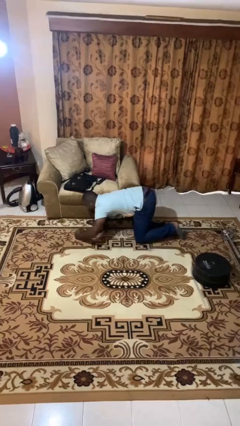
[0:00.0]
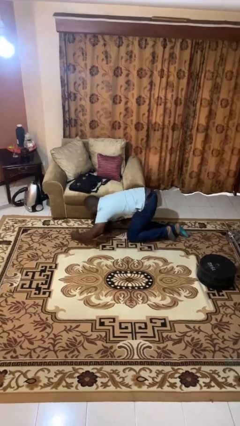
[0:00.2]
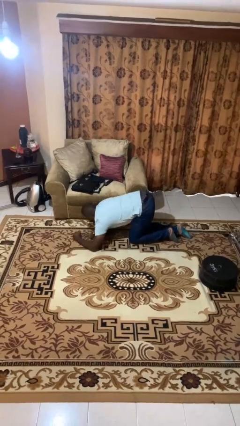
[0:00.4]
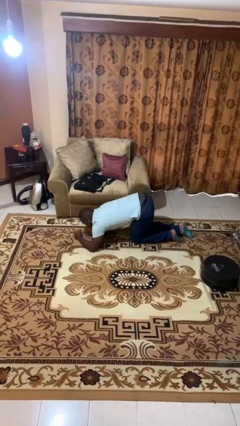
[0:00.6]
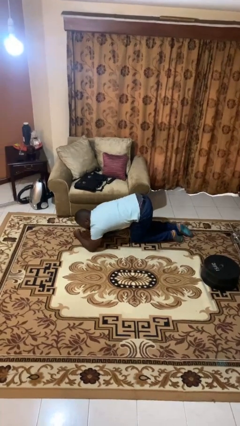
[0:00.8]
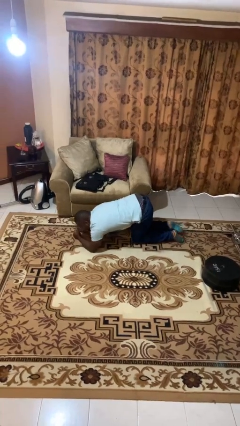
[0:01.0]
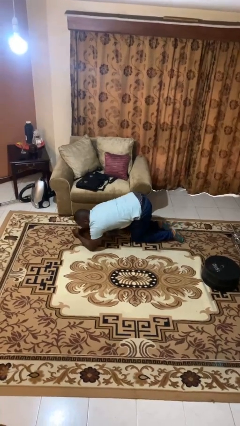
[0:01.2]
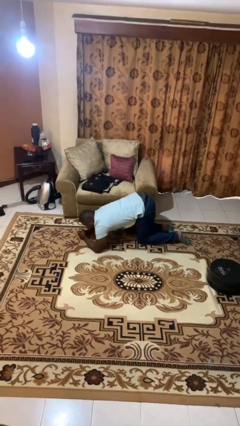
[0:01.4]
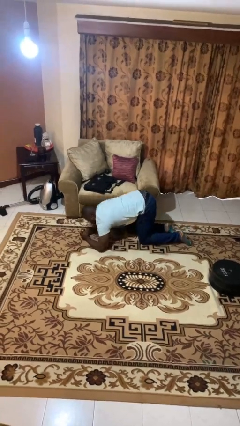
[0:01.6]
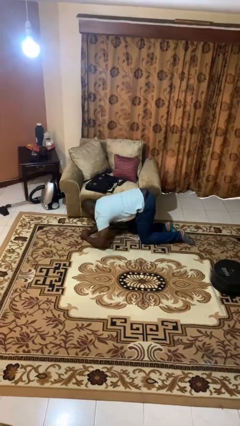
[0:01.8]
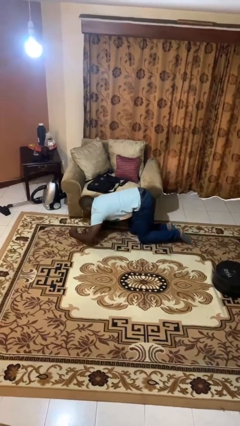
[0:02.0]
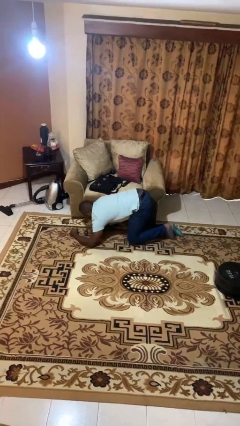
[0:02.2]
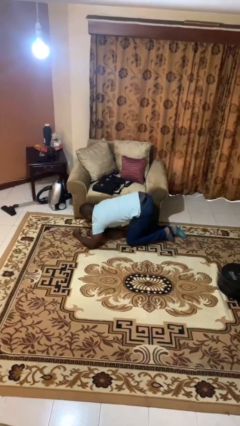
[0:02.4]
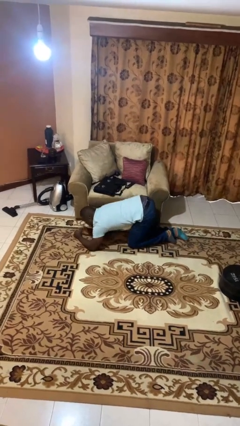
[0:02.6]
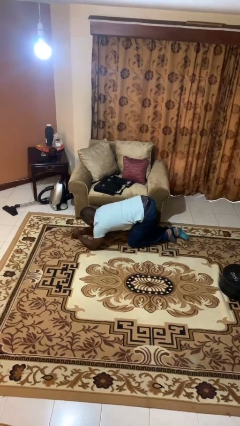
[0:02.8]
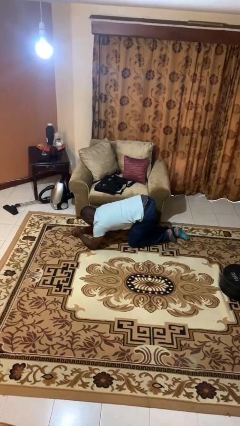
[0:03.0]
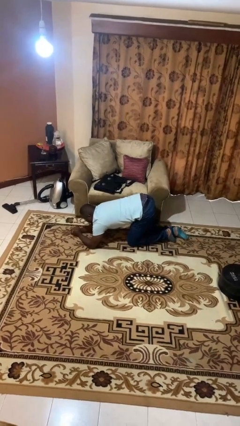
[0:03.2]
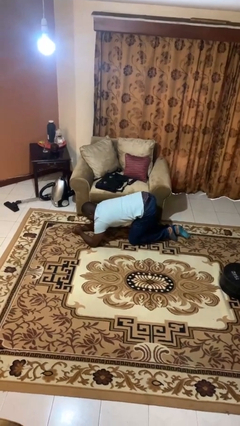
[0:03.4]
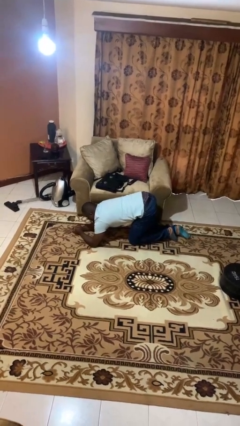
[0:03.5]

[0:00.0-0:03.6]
person crawls

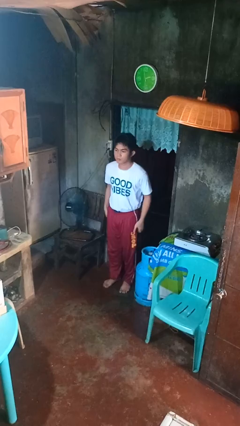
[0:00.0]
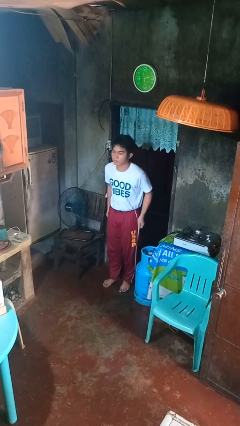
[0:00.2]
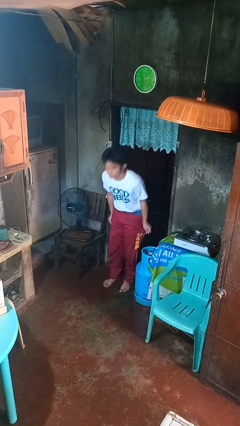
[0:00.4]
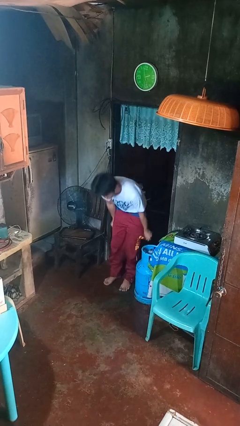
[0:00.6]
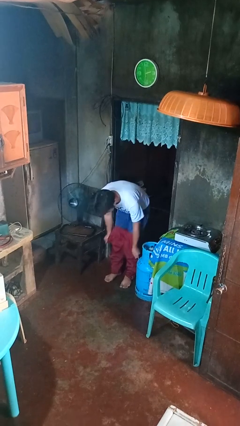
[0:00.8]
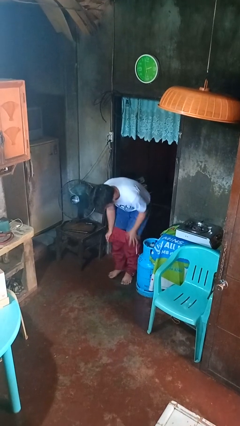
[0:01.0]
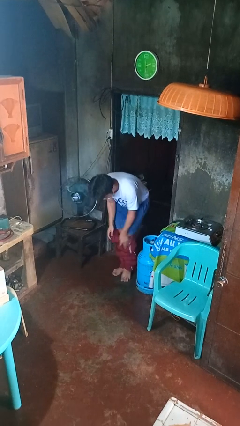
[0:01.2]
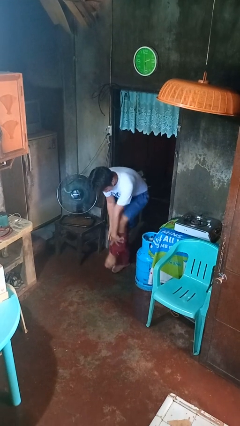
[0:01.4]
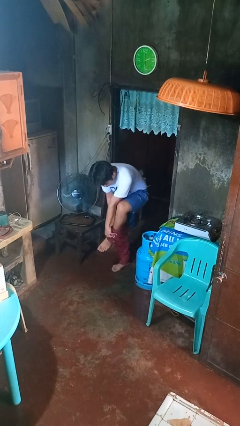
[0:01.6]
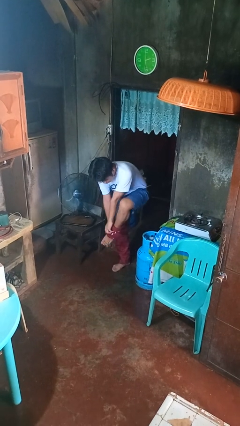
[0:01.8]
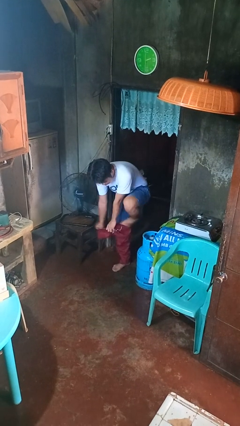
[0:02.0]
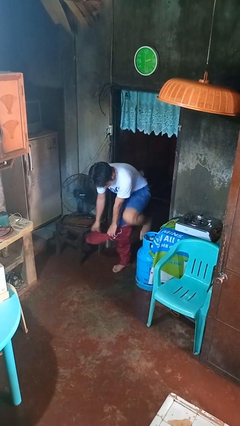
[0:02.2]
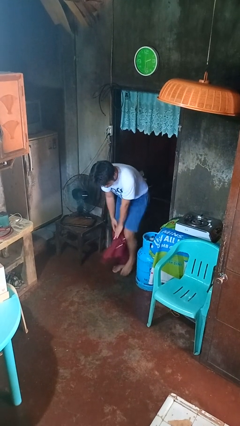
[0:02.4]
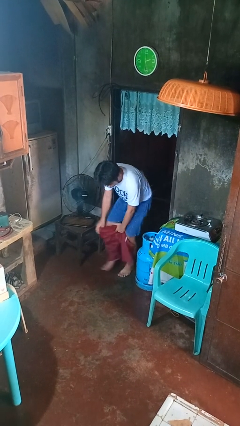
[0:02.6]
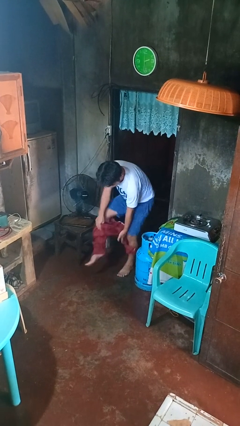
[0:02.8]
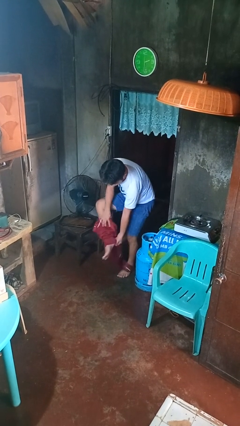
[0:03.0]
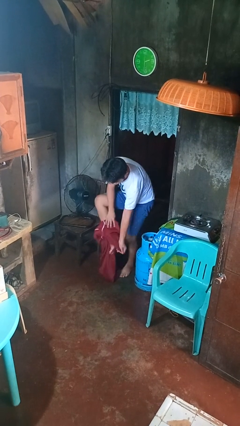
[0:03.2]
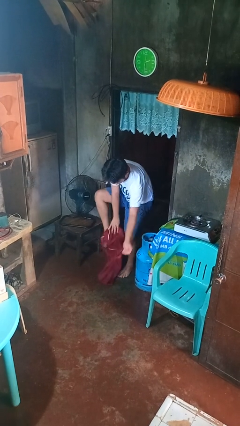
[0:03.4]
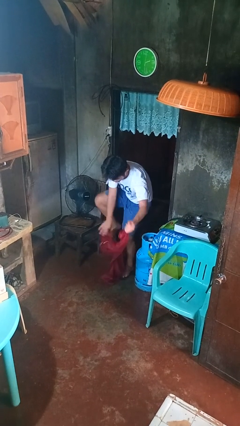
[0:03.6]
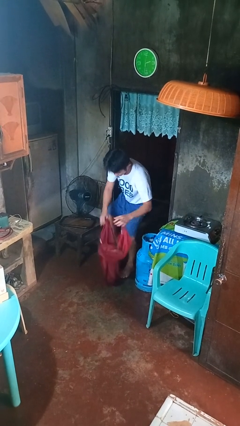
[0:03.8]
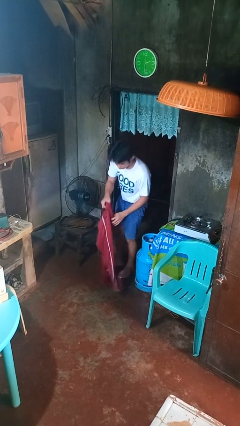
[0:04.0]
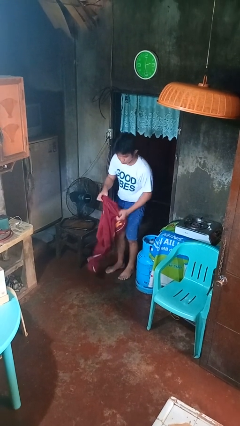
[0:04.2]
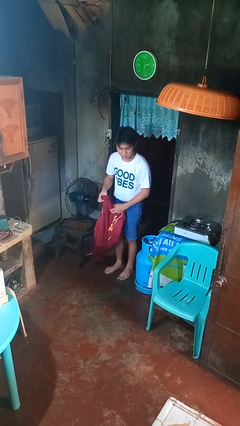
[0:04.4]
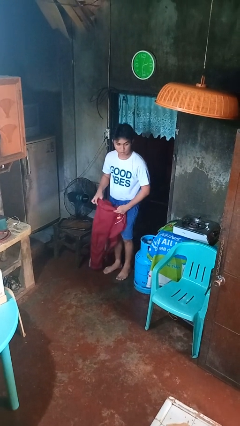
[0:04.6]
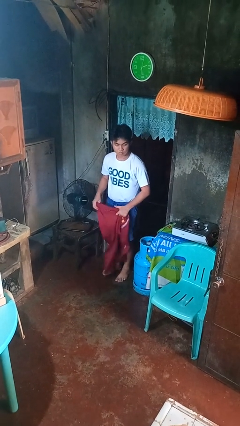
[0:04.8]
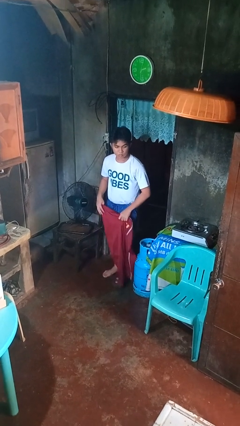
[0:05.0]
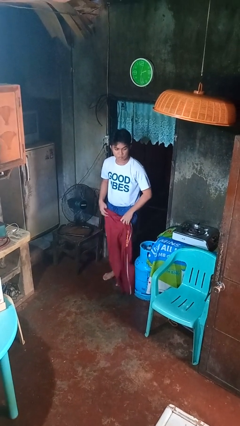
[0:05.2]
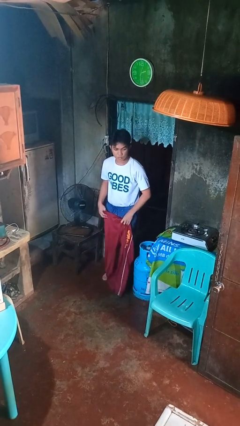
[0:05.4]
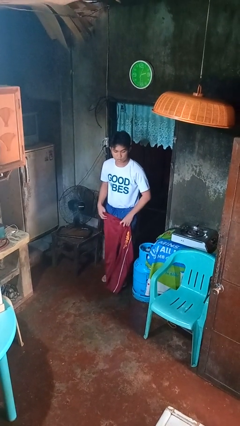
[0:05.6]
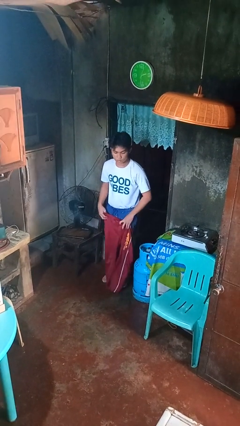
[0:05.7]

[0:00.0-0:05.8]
person takes off pants

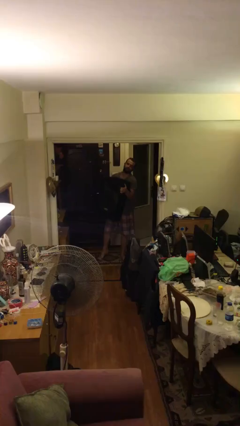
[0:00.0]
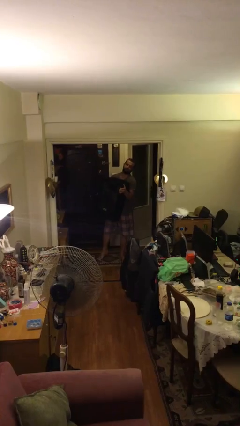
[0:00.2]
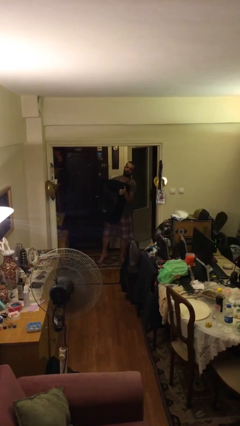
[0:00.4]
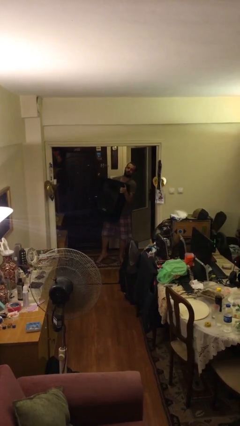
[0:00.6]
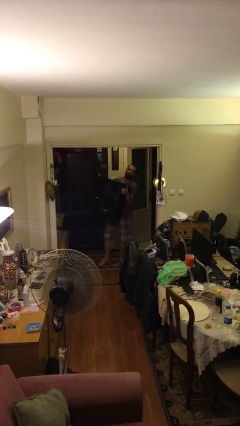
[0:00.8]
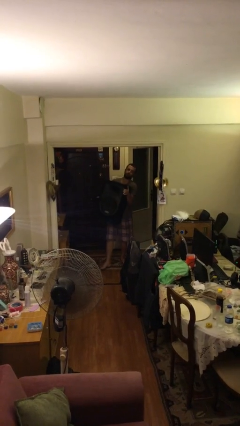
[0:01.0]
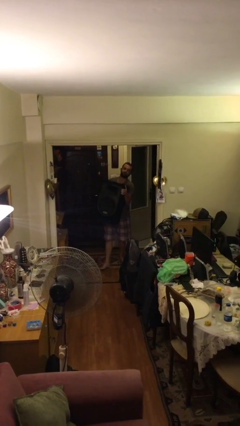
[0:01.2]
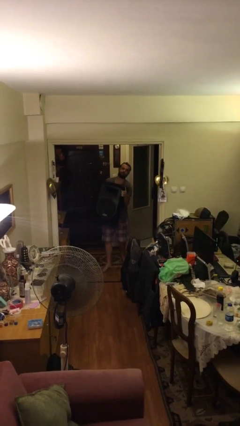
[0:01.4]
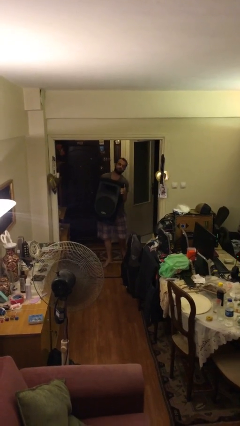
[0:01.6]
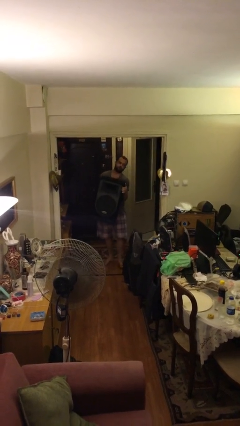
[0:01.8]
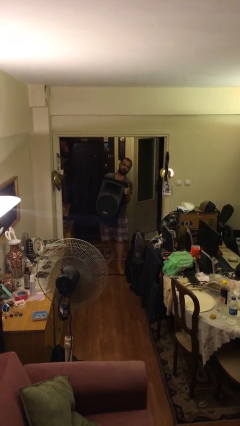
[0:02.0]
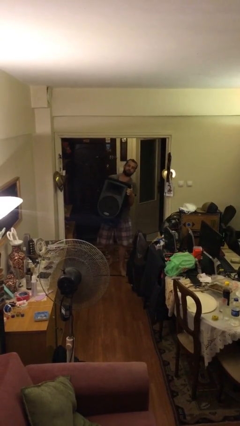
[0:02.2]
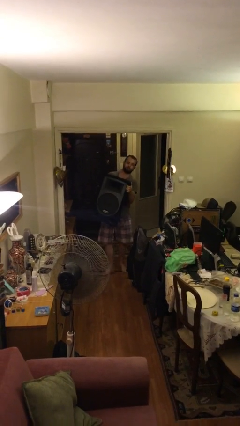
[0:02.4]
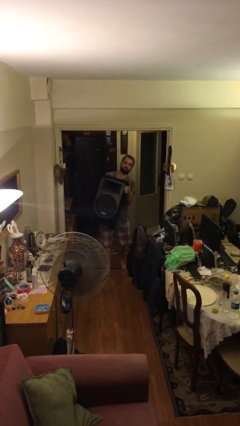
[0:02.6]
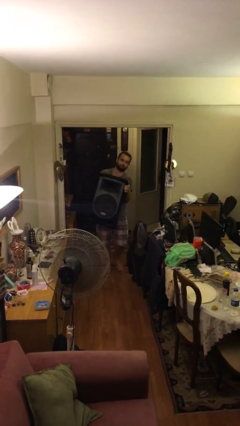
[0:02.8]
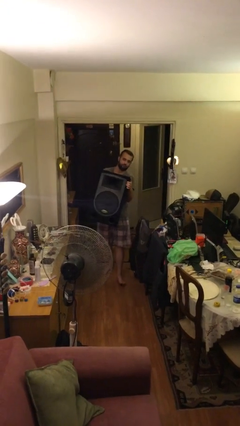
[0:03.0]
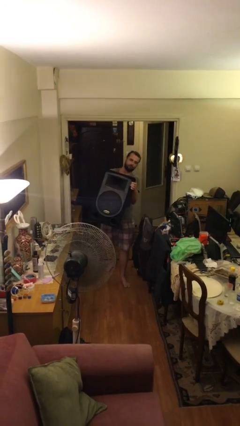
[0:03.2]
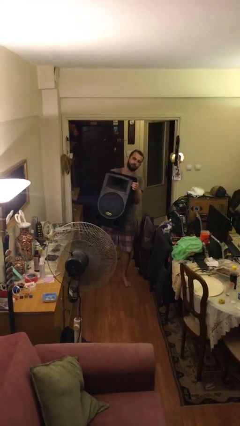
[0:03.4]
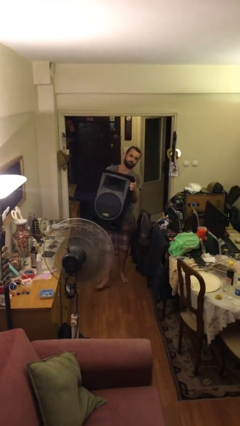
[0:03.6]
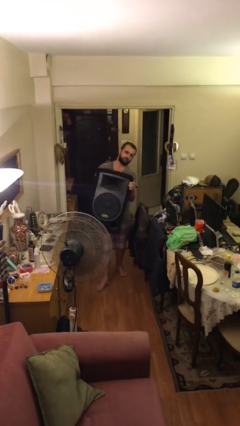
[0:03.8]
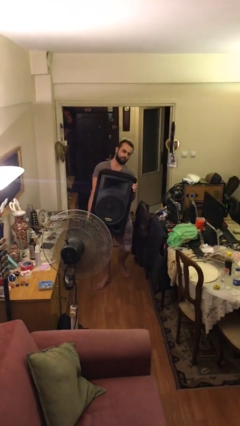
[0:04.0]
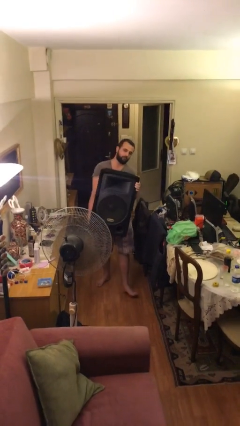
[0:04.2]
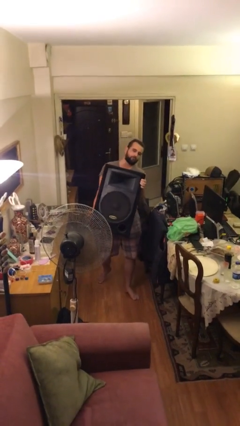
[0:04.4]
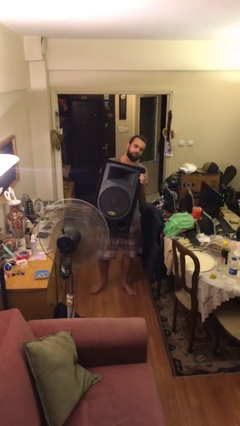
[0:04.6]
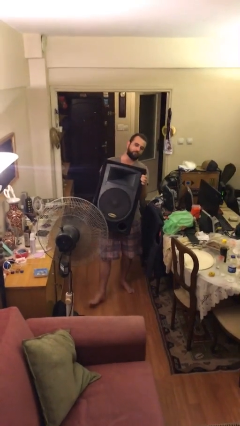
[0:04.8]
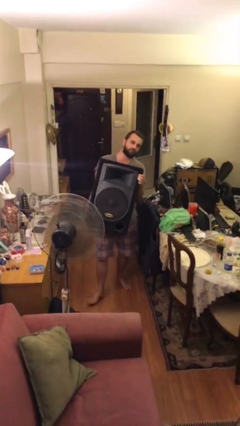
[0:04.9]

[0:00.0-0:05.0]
person carries heavy object

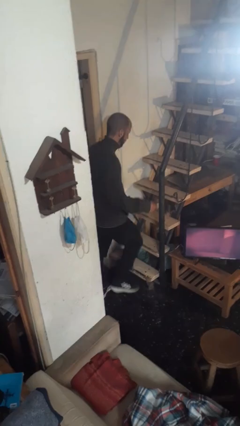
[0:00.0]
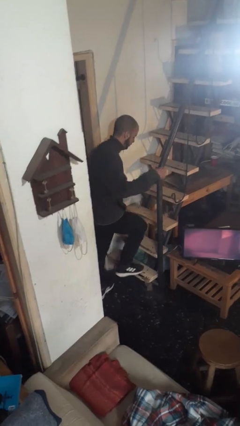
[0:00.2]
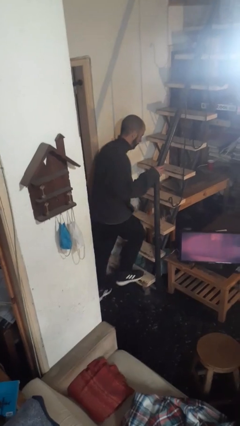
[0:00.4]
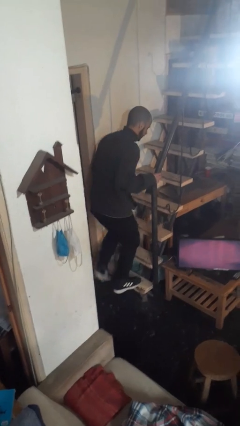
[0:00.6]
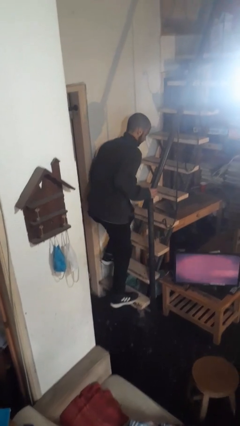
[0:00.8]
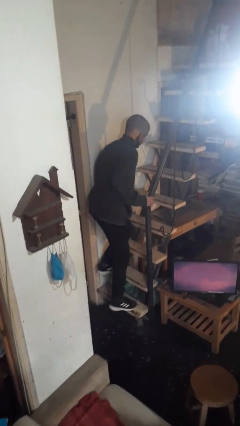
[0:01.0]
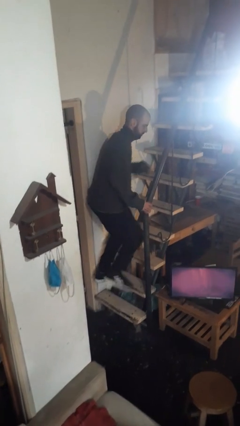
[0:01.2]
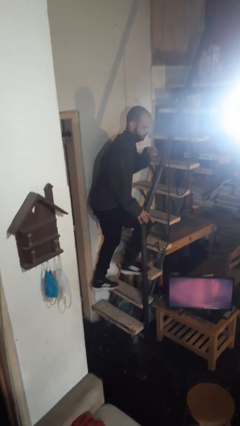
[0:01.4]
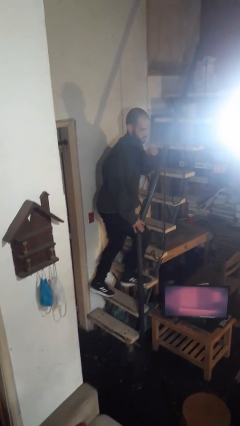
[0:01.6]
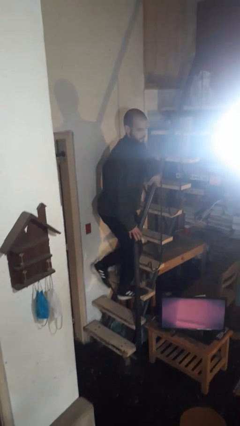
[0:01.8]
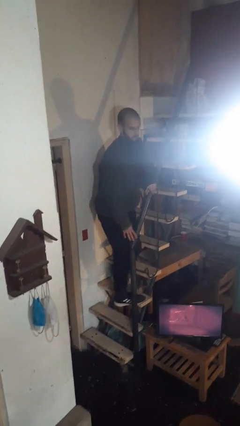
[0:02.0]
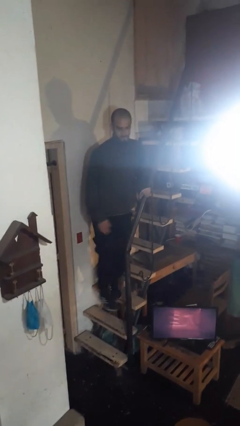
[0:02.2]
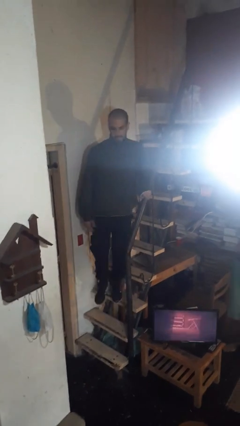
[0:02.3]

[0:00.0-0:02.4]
person climbs up stairs

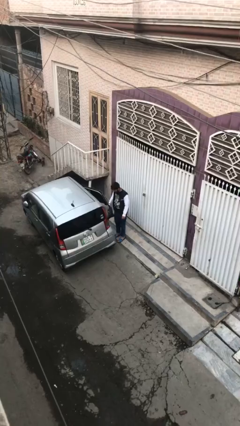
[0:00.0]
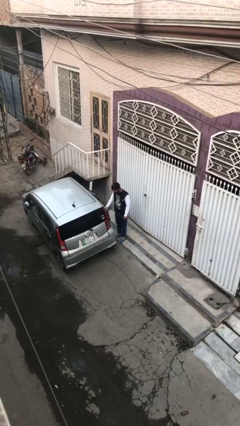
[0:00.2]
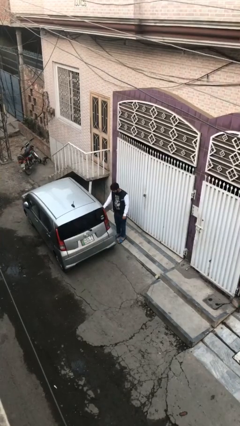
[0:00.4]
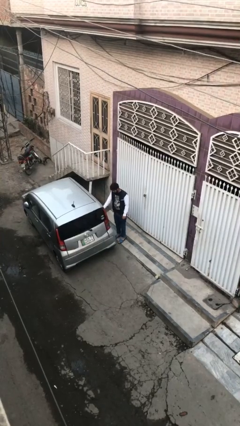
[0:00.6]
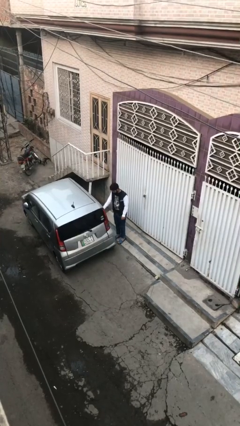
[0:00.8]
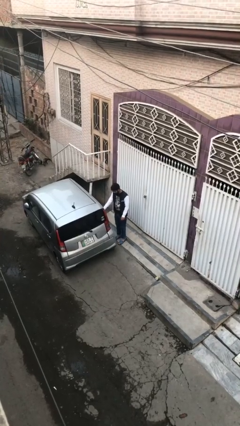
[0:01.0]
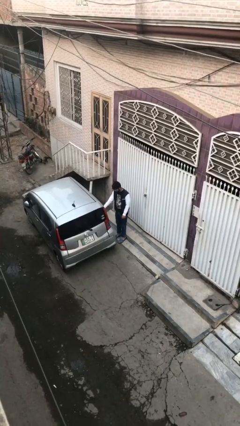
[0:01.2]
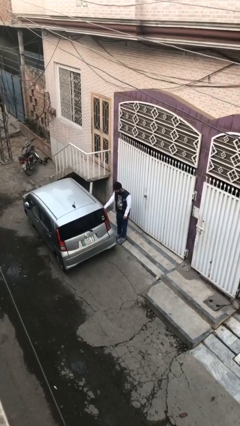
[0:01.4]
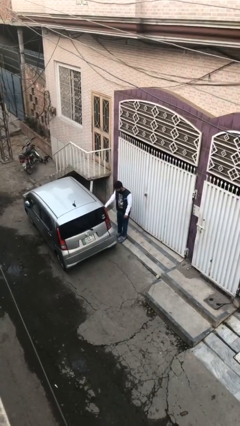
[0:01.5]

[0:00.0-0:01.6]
person closes car door
